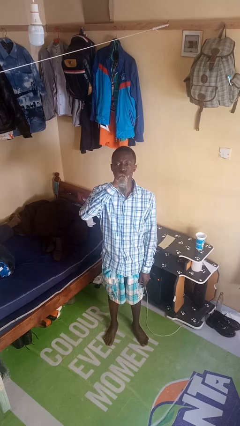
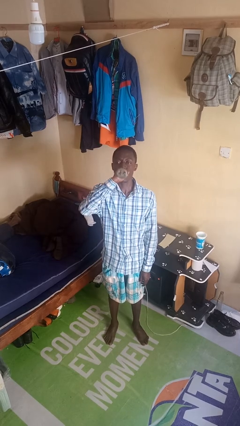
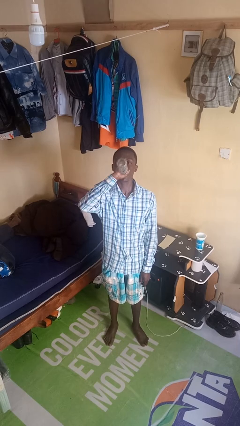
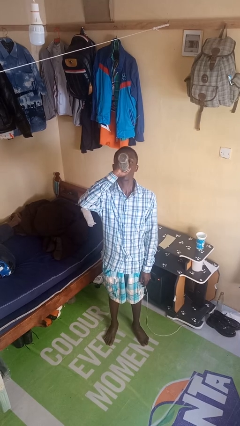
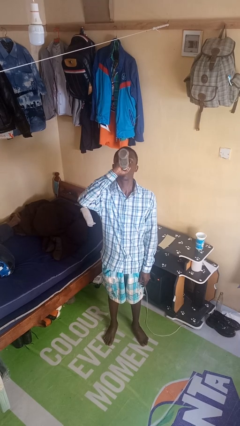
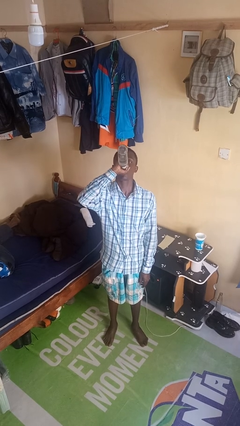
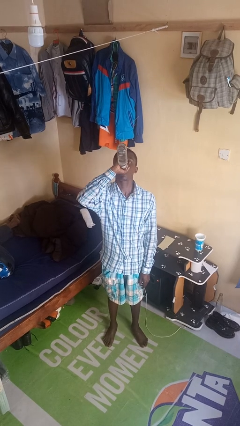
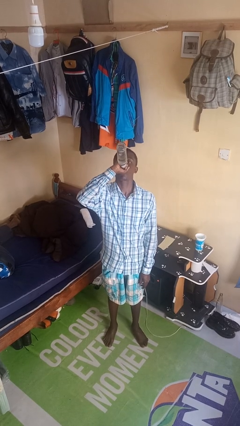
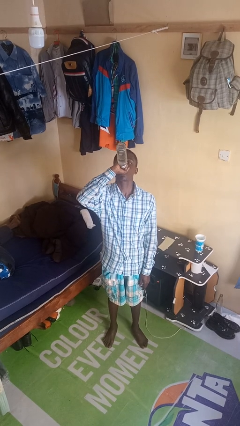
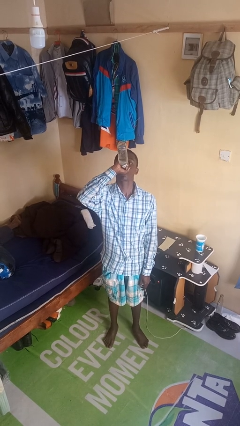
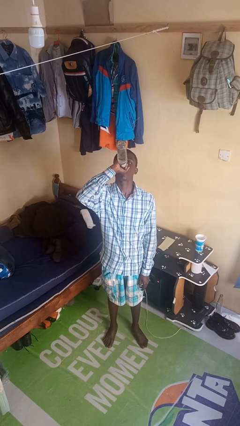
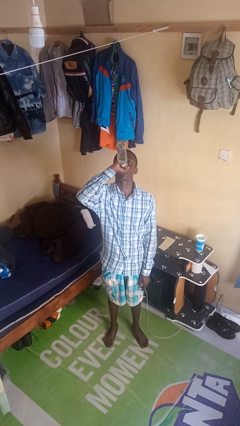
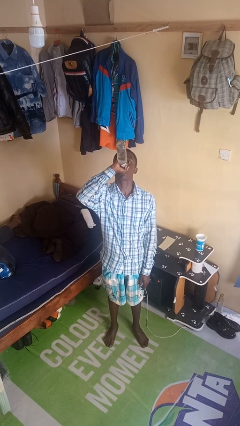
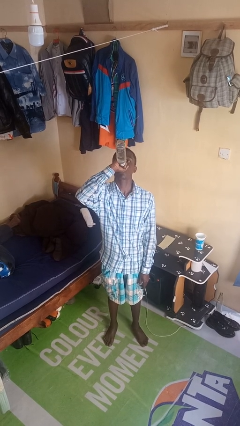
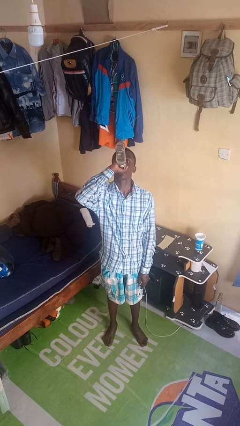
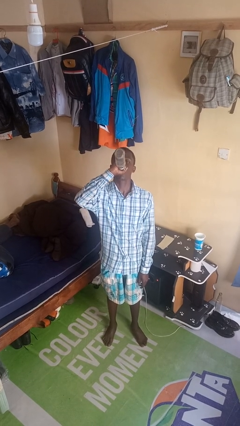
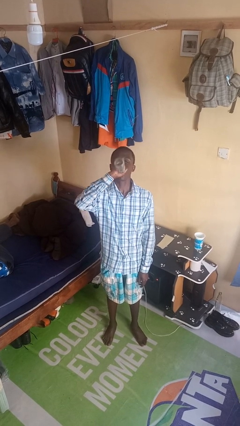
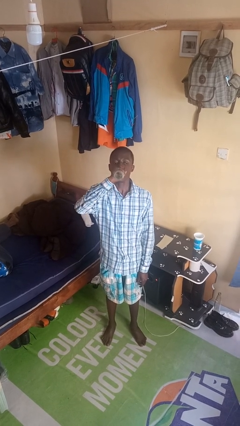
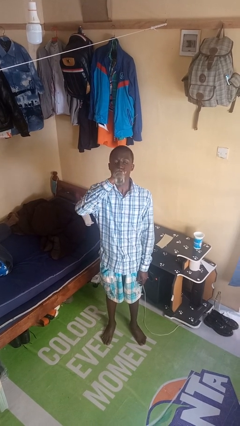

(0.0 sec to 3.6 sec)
person drinks from bottle

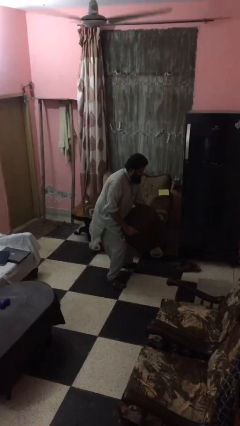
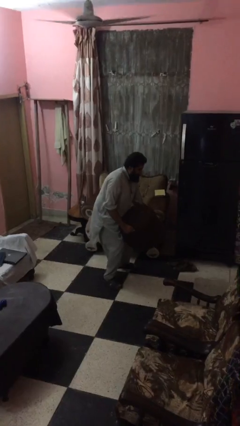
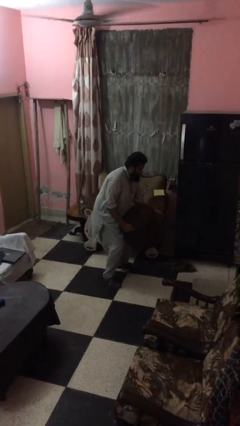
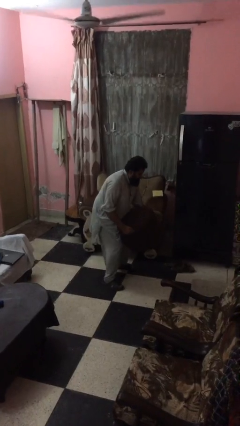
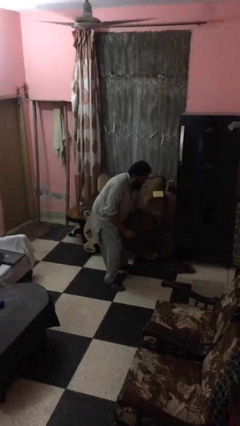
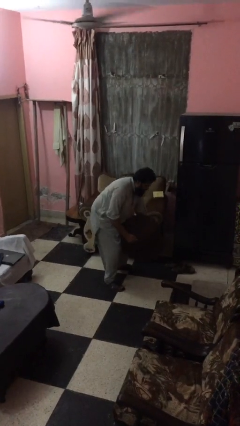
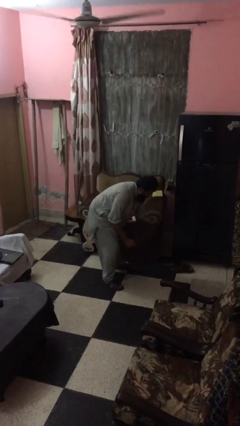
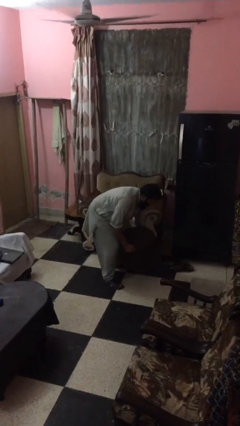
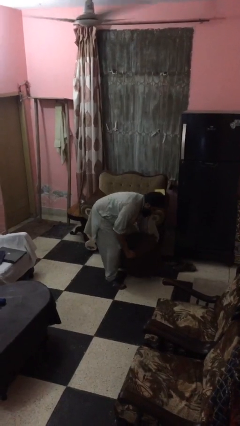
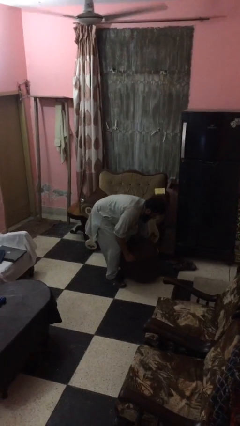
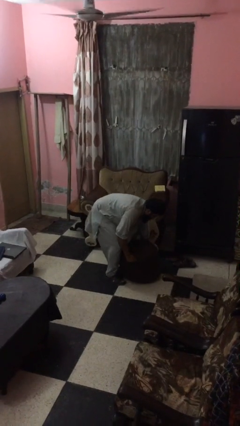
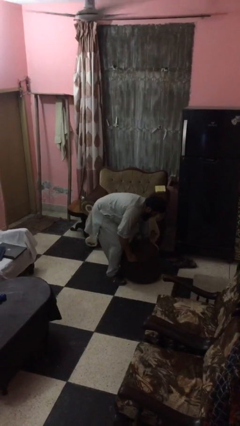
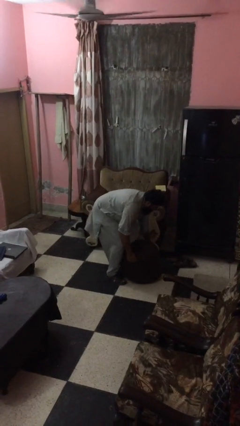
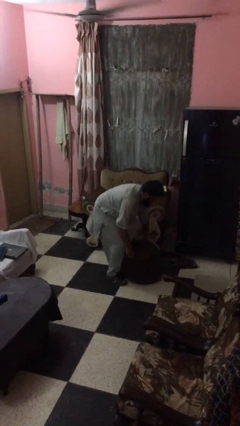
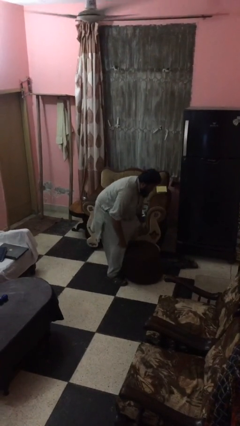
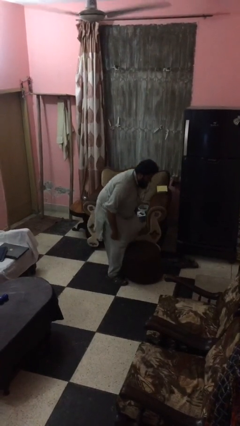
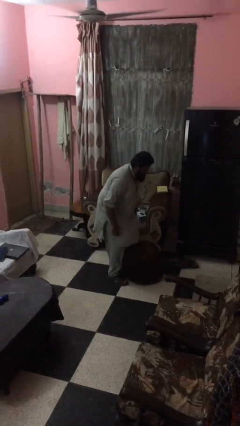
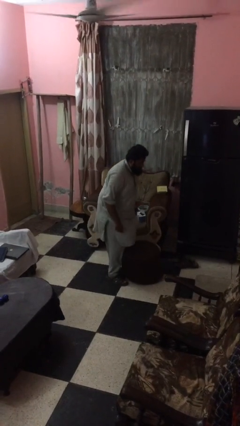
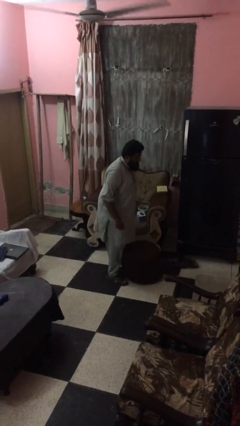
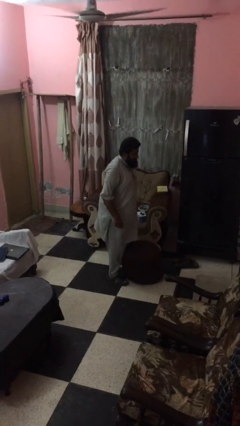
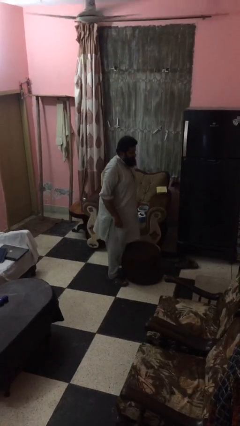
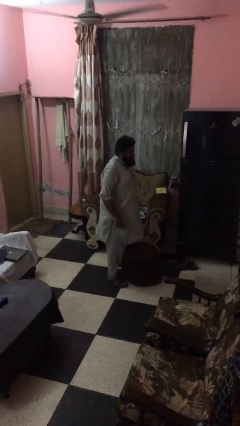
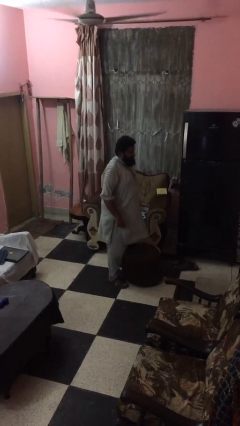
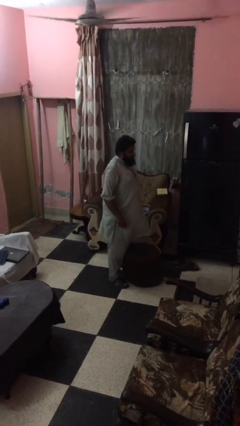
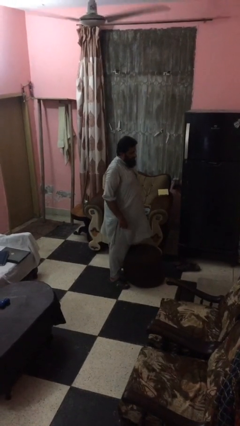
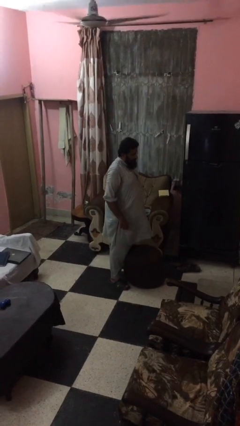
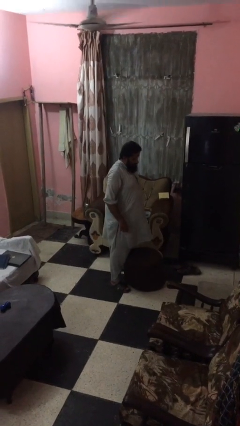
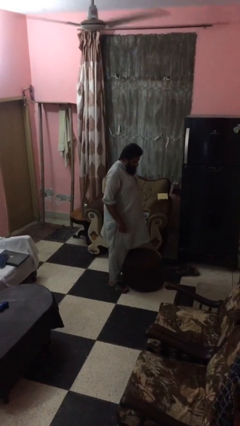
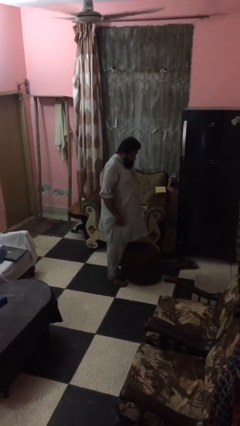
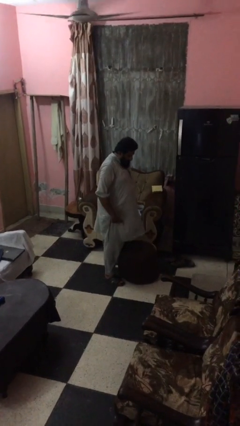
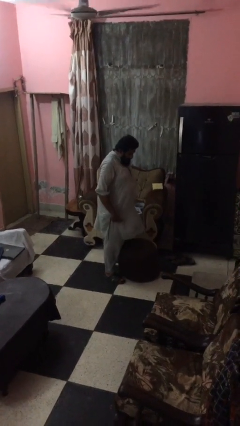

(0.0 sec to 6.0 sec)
person puts down object on floor

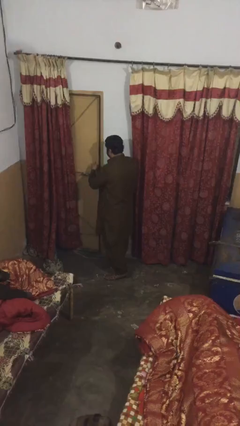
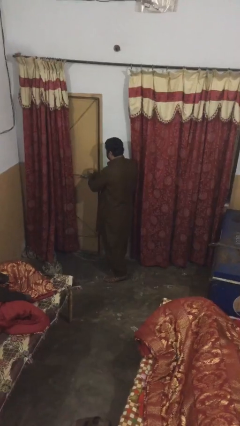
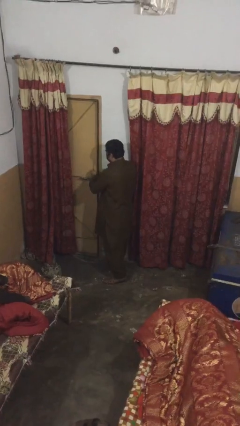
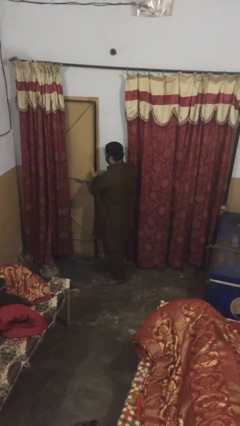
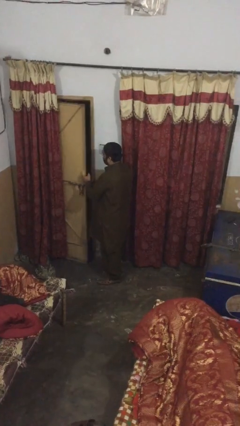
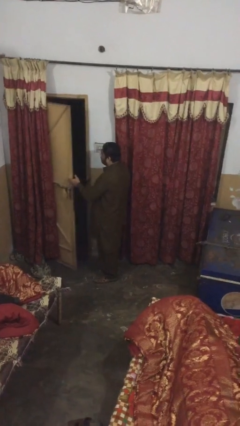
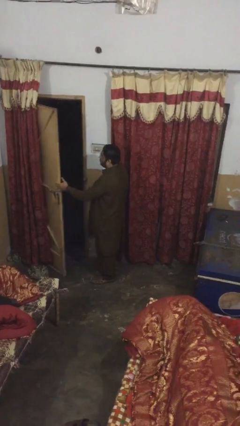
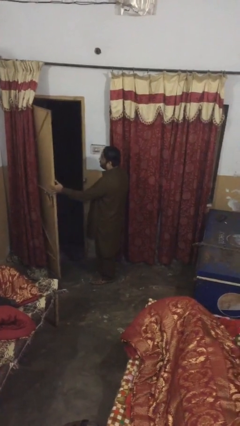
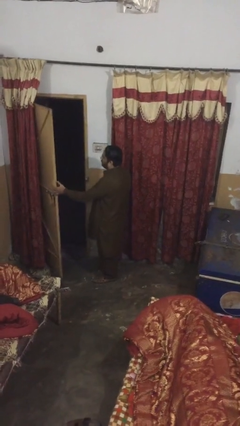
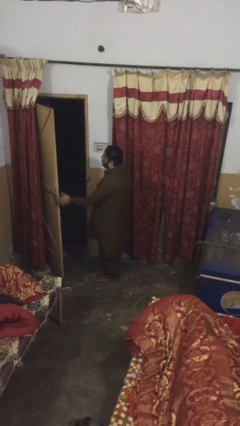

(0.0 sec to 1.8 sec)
person opens facility door

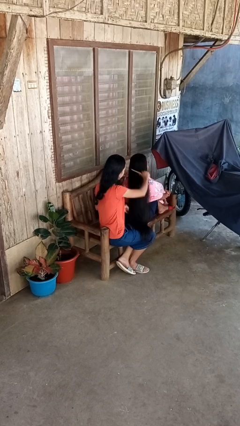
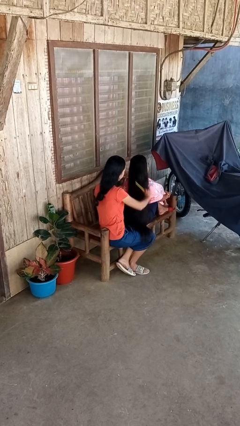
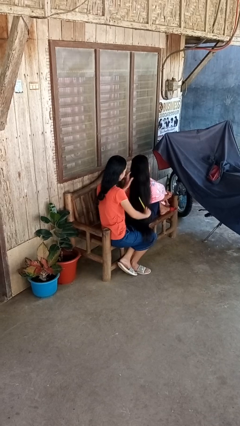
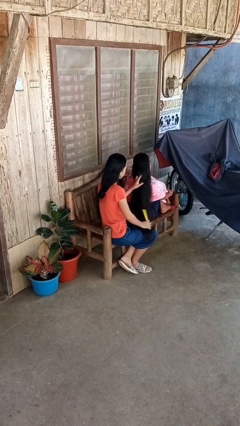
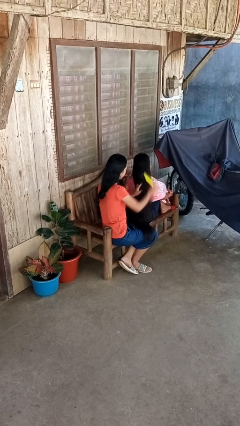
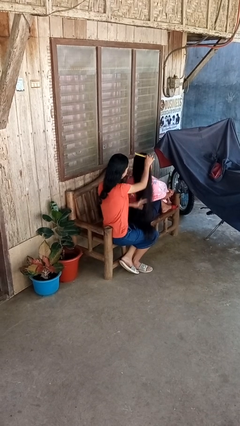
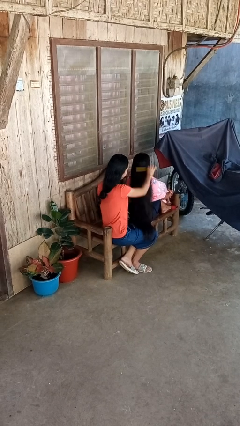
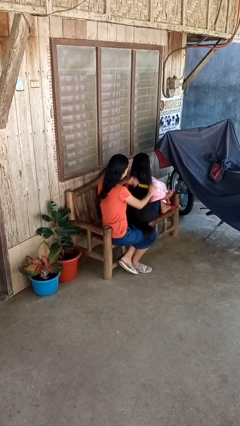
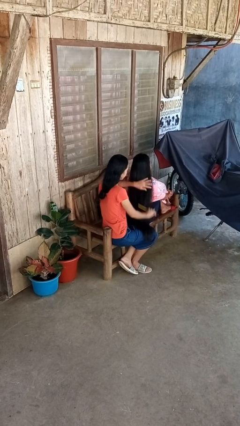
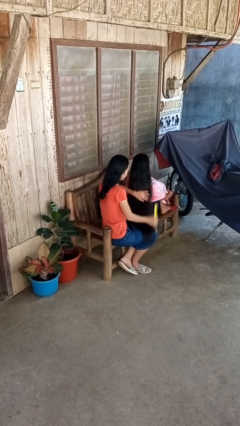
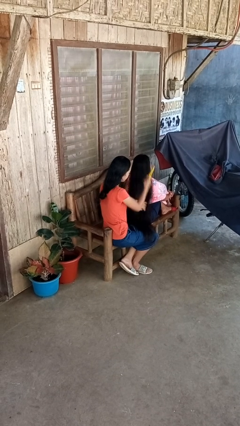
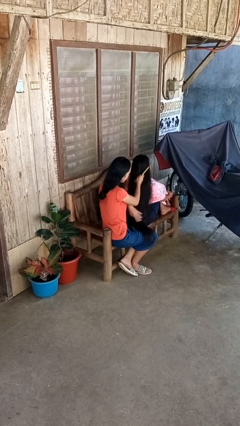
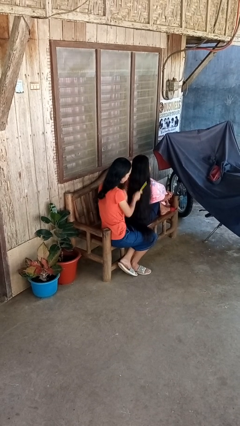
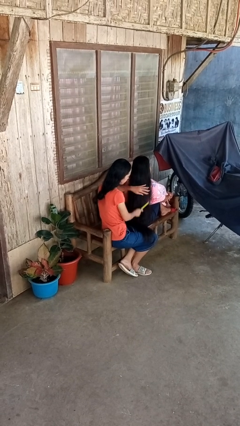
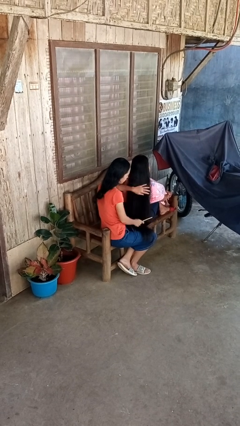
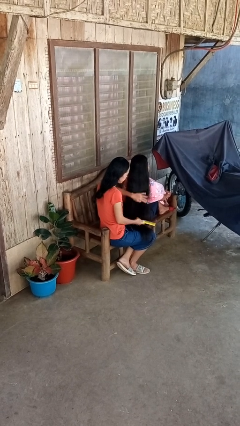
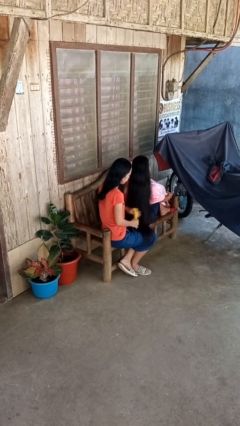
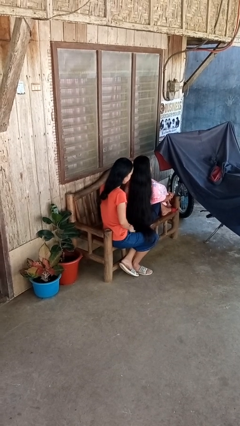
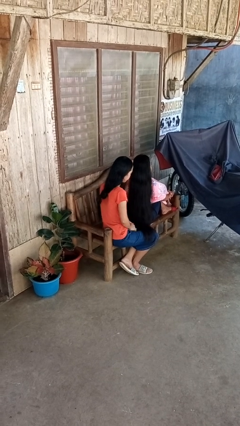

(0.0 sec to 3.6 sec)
person brushes hair of person

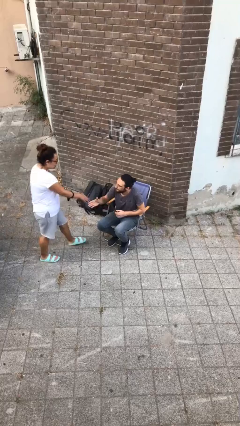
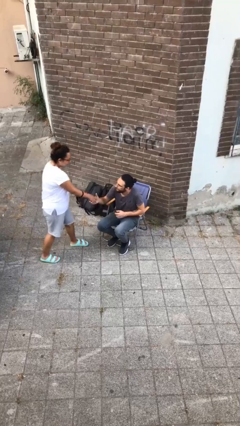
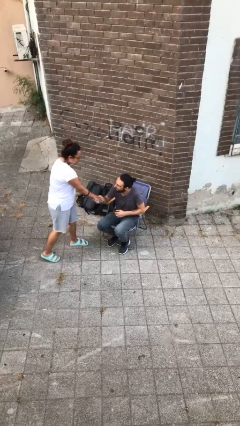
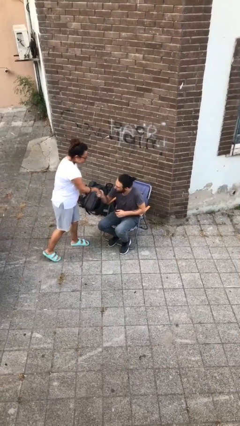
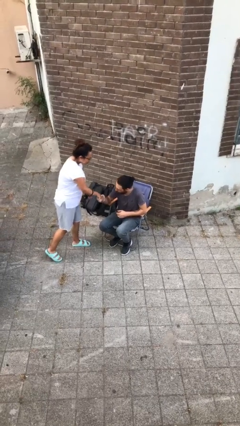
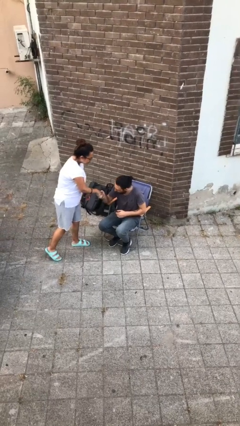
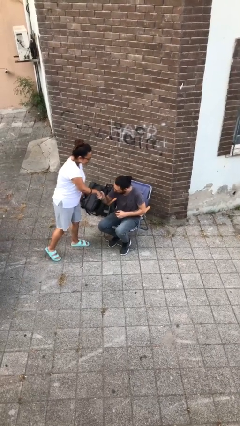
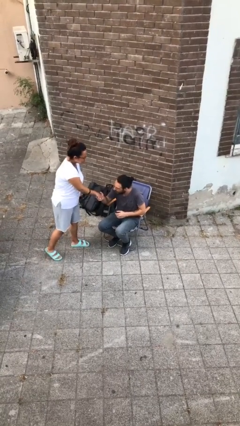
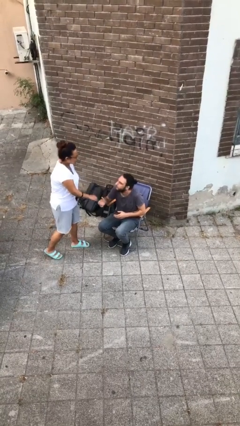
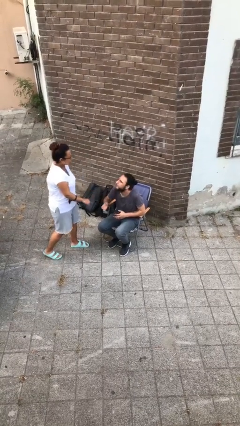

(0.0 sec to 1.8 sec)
person shakes hand

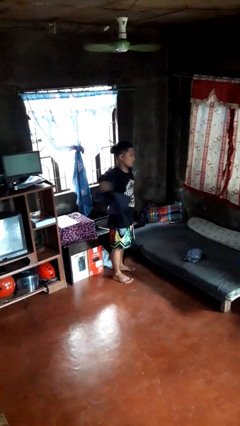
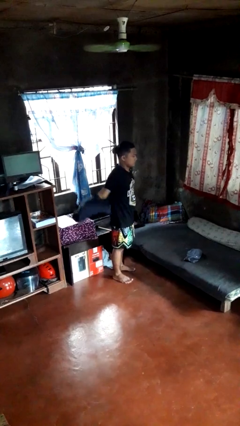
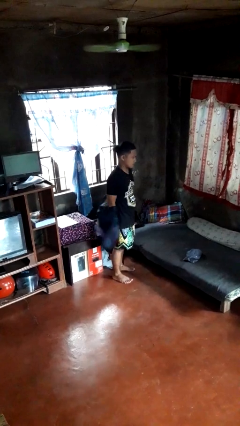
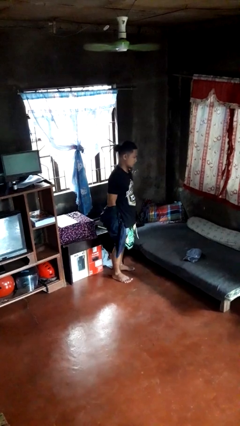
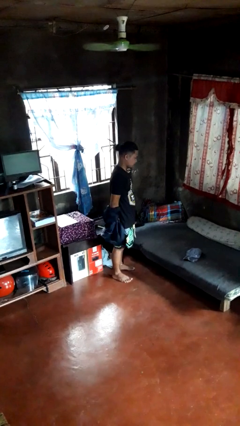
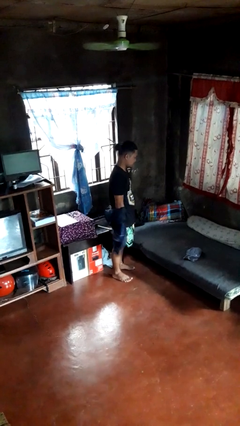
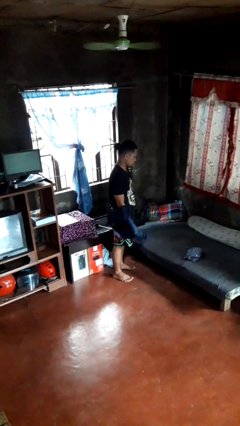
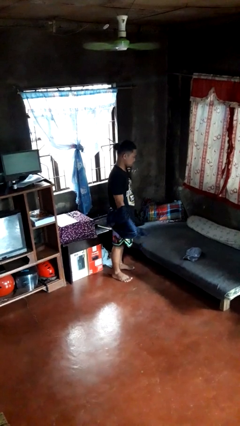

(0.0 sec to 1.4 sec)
person takes off jacket
